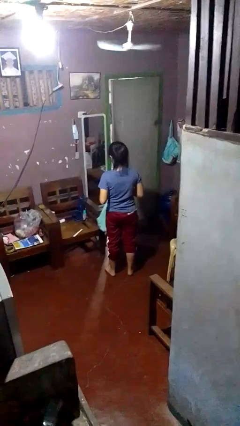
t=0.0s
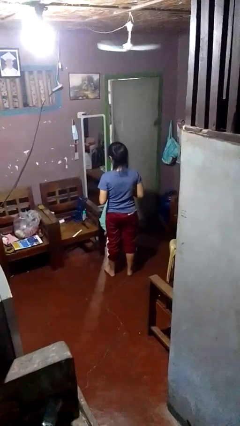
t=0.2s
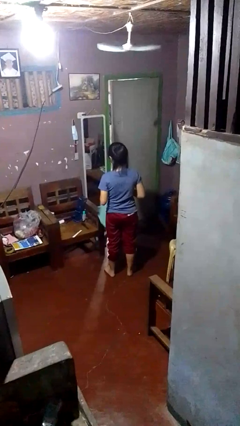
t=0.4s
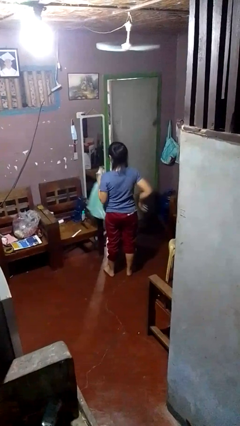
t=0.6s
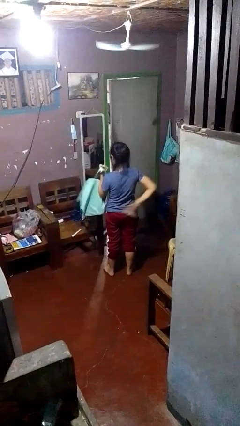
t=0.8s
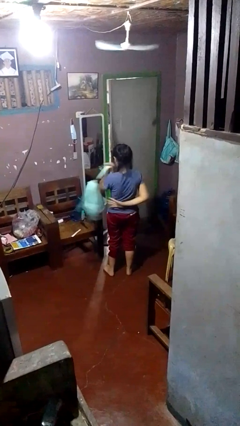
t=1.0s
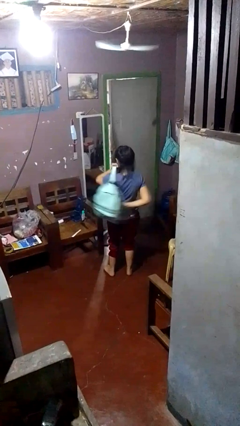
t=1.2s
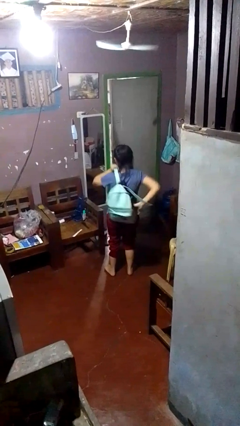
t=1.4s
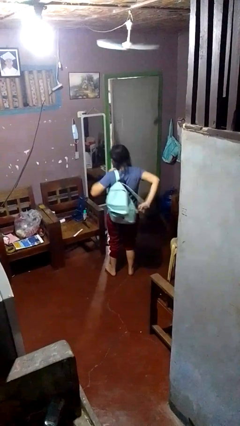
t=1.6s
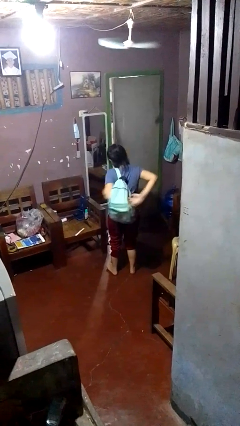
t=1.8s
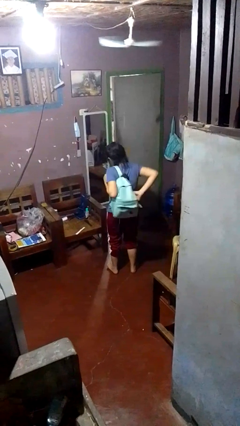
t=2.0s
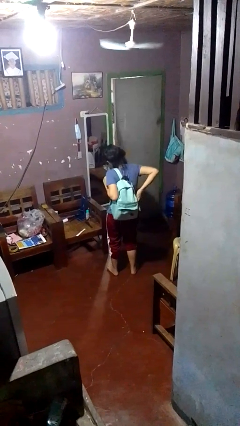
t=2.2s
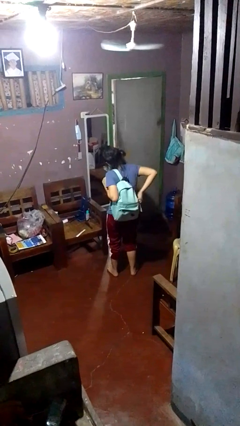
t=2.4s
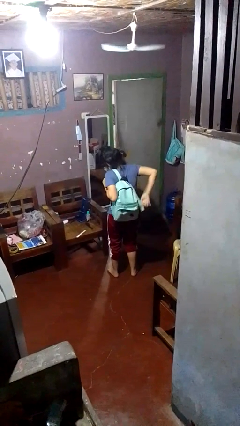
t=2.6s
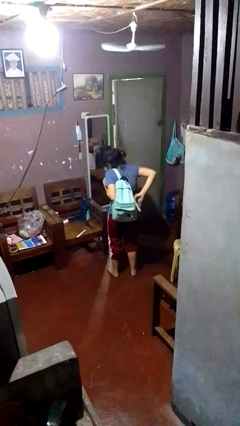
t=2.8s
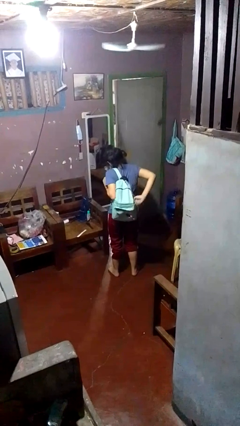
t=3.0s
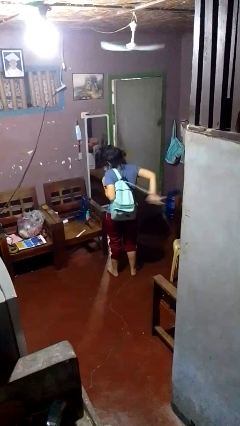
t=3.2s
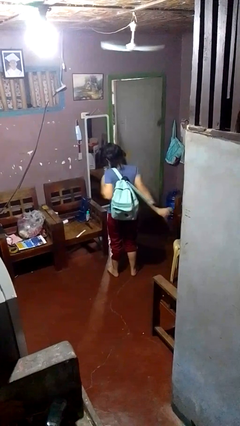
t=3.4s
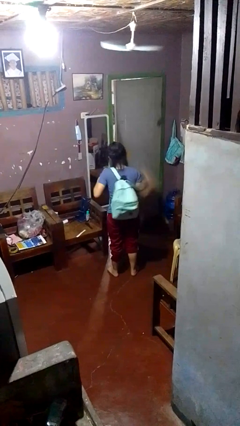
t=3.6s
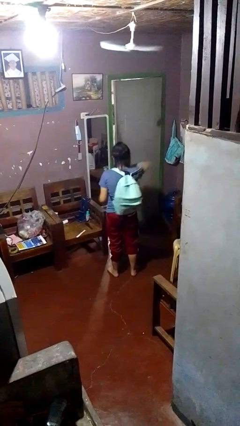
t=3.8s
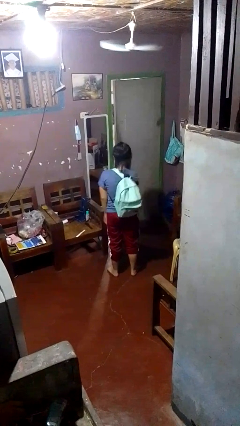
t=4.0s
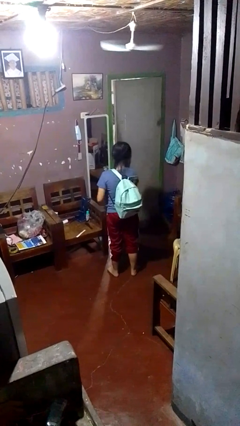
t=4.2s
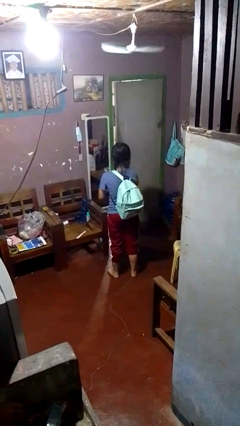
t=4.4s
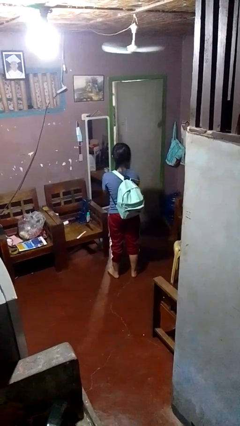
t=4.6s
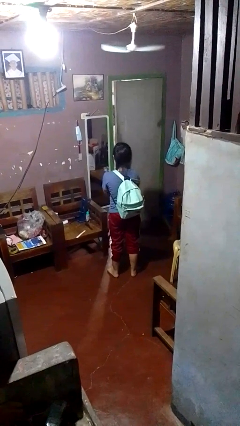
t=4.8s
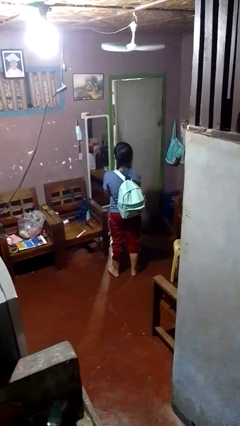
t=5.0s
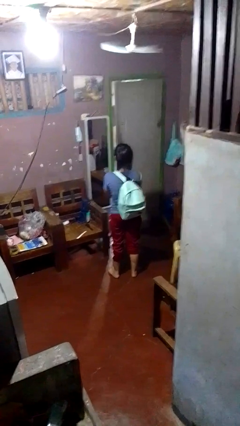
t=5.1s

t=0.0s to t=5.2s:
person puts on backpack

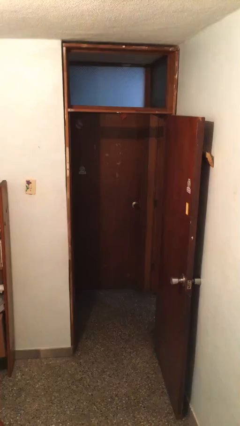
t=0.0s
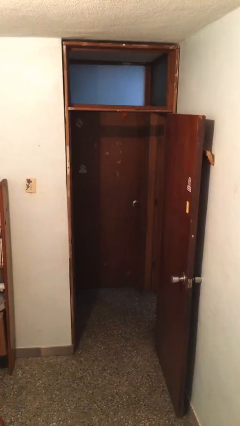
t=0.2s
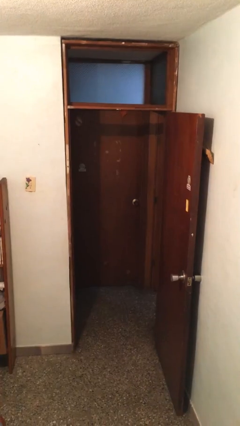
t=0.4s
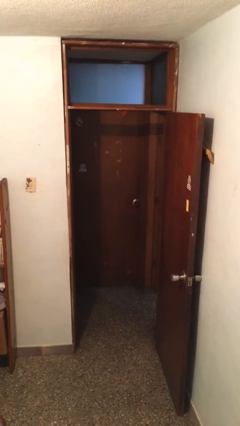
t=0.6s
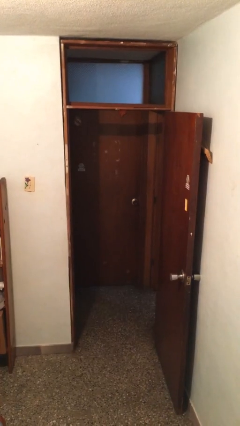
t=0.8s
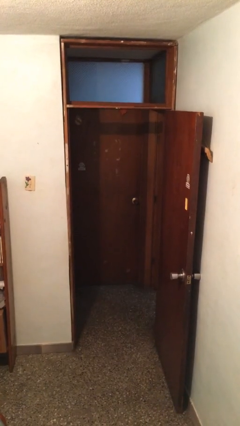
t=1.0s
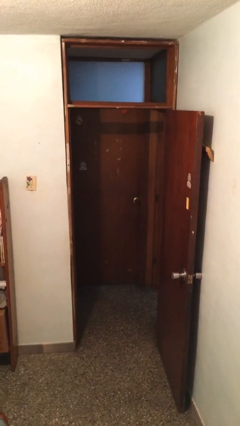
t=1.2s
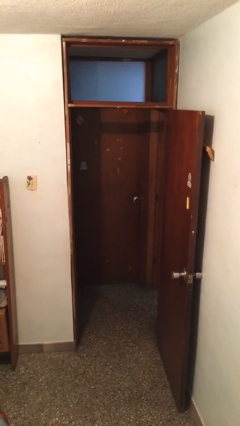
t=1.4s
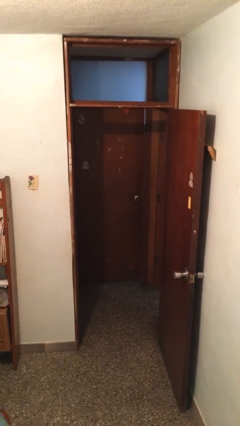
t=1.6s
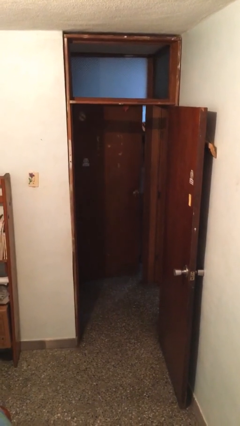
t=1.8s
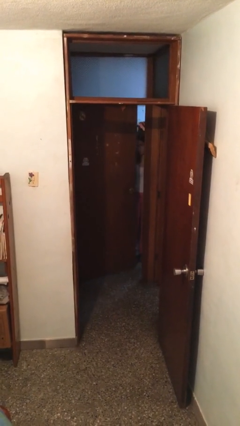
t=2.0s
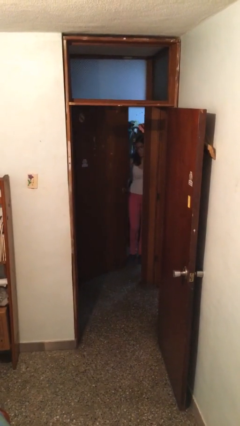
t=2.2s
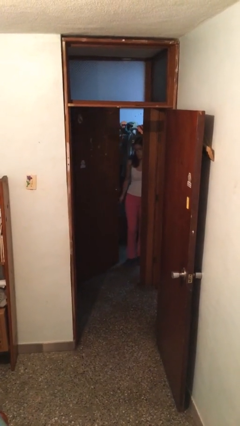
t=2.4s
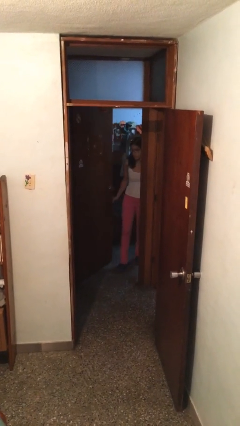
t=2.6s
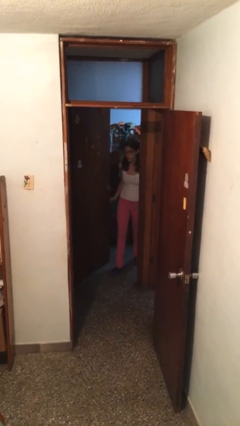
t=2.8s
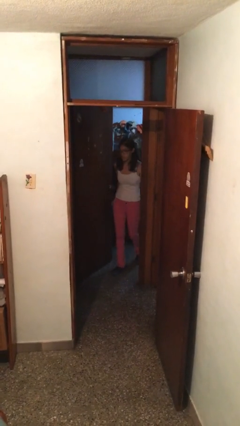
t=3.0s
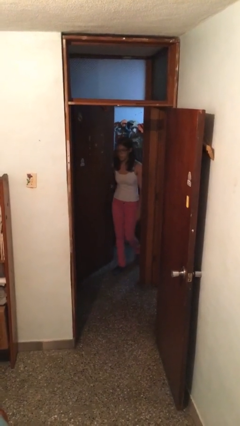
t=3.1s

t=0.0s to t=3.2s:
person opens facility door

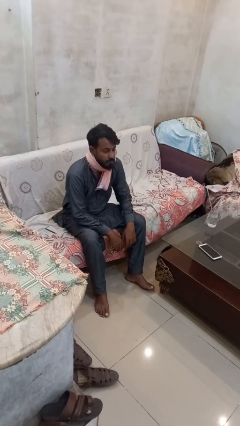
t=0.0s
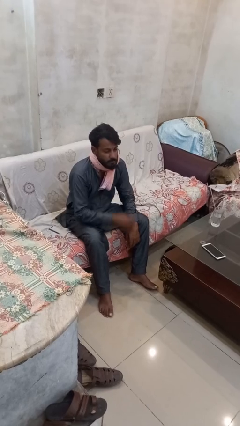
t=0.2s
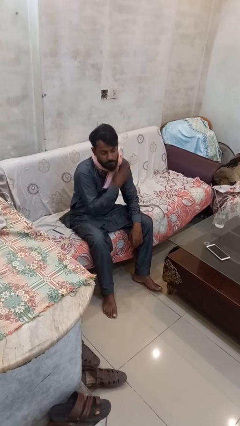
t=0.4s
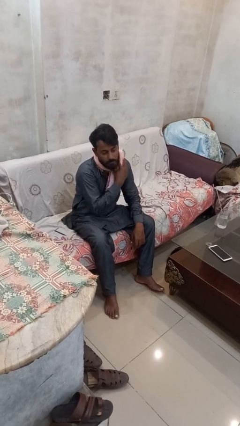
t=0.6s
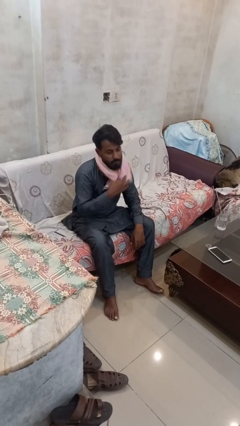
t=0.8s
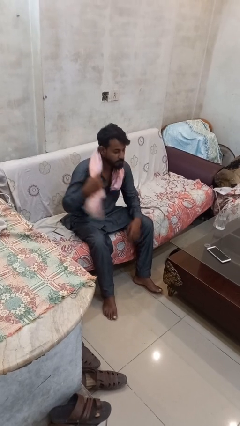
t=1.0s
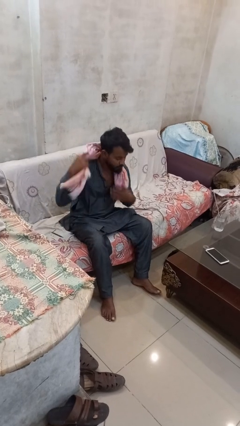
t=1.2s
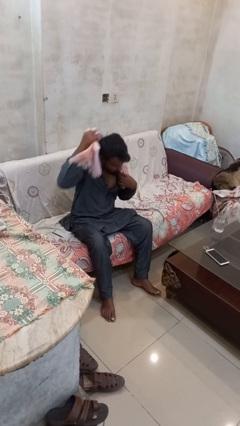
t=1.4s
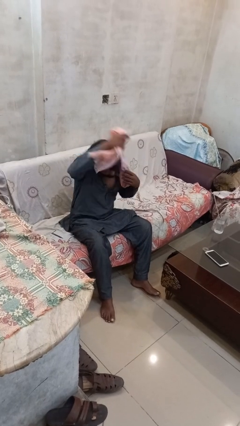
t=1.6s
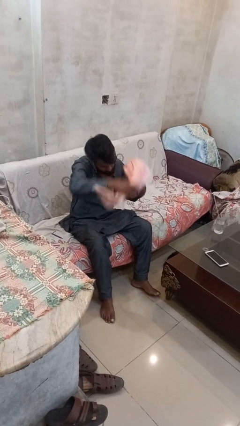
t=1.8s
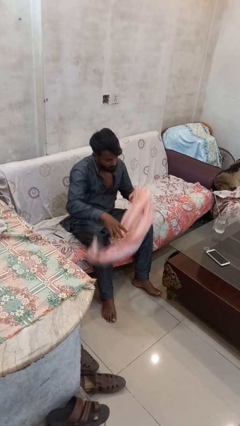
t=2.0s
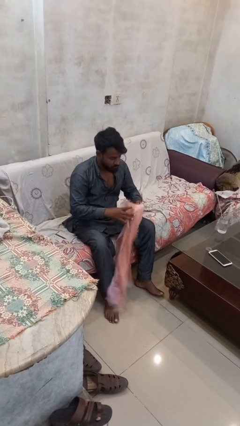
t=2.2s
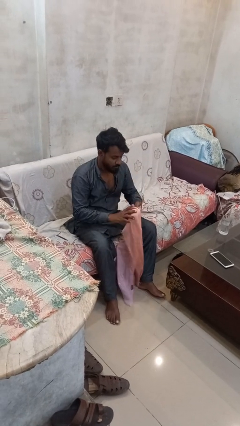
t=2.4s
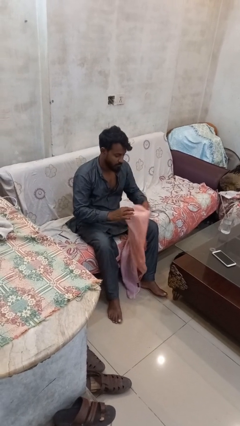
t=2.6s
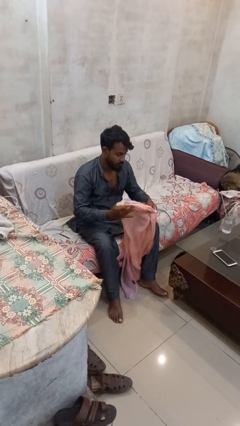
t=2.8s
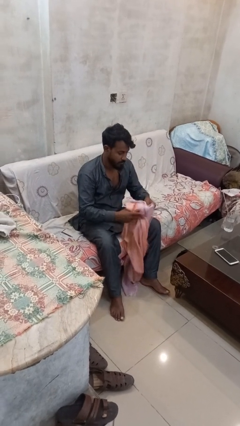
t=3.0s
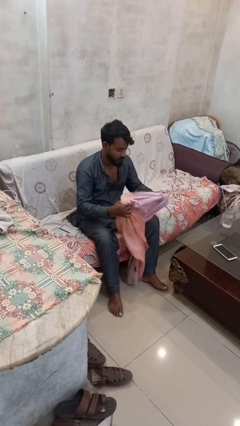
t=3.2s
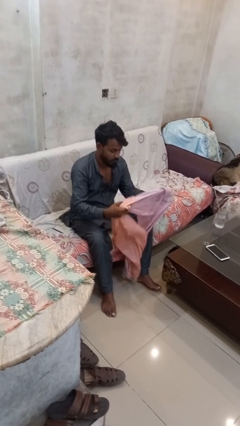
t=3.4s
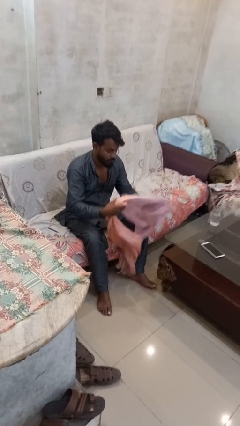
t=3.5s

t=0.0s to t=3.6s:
person takes off scarf

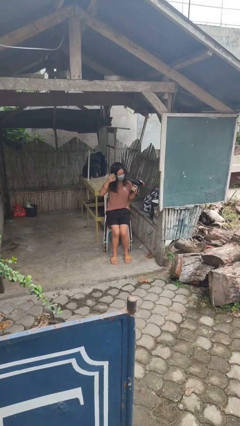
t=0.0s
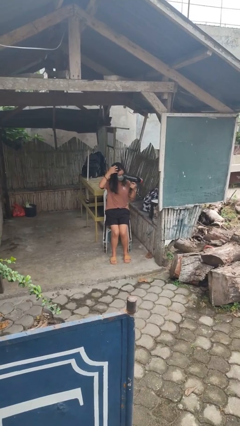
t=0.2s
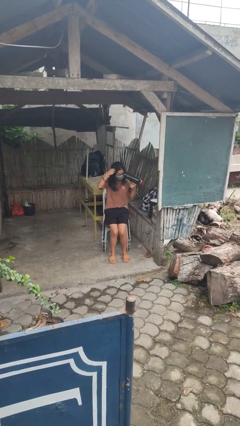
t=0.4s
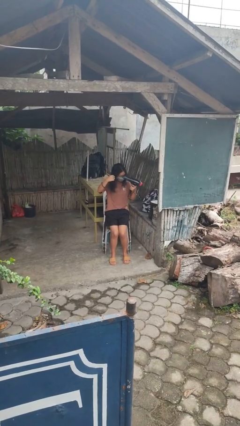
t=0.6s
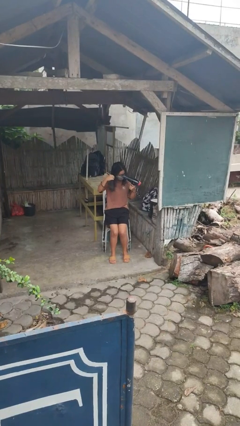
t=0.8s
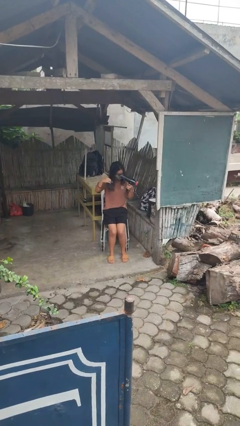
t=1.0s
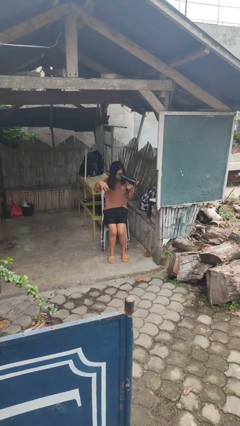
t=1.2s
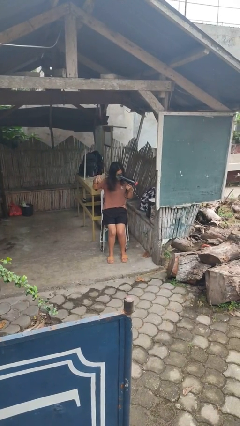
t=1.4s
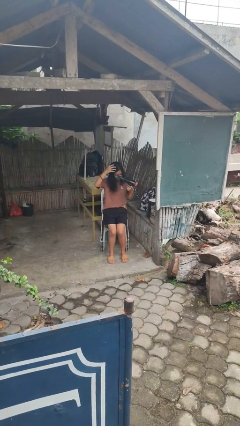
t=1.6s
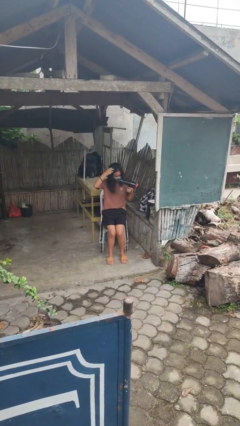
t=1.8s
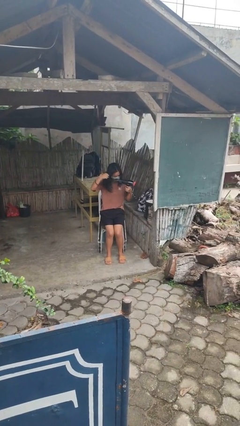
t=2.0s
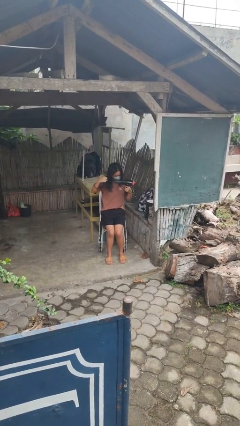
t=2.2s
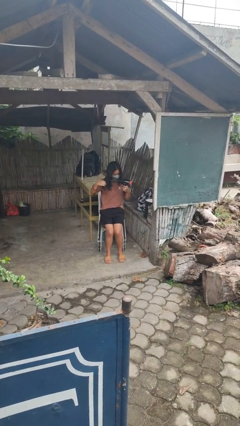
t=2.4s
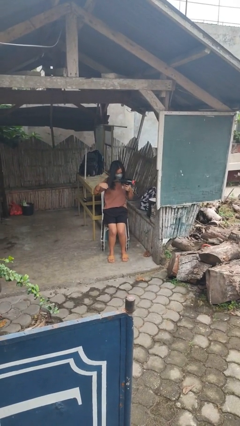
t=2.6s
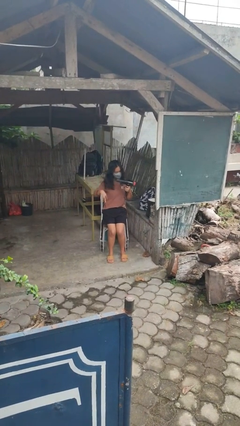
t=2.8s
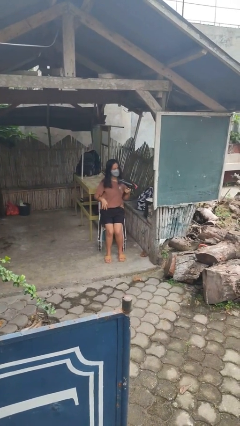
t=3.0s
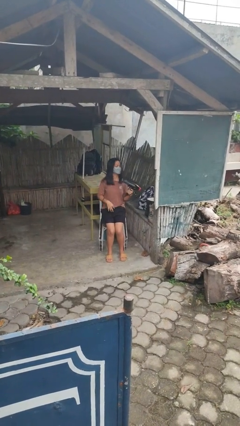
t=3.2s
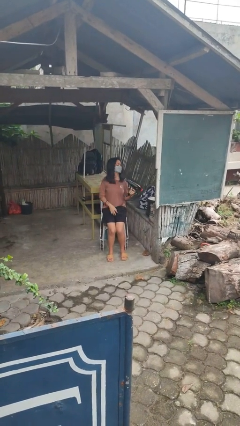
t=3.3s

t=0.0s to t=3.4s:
person dries hair with hairdryer

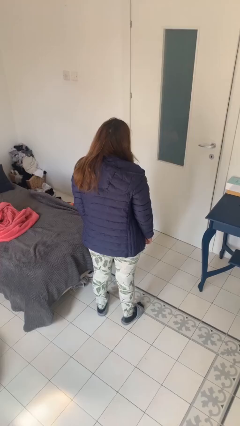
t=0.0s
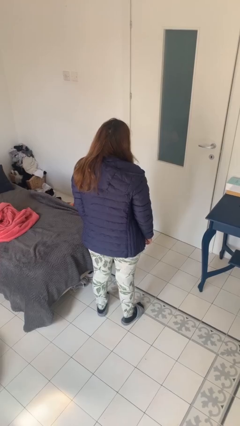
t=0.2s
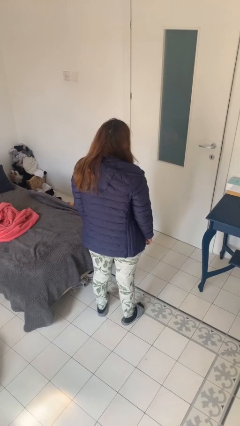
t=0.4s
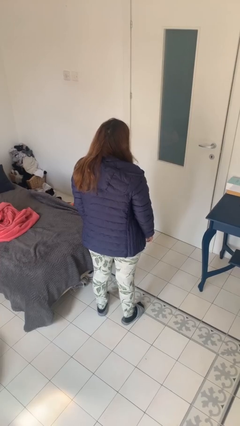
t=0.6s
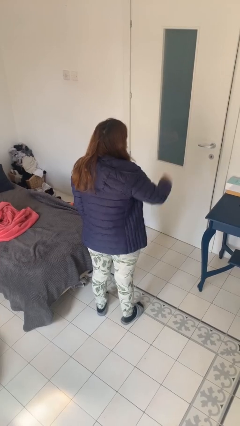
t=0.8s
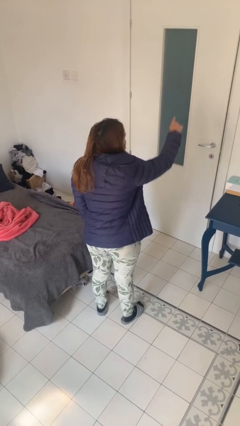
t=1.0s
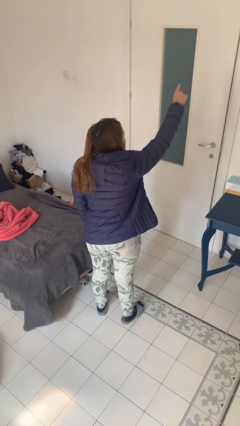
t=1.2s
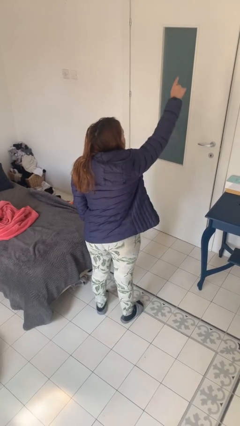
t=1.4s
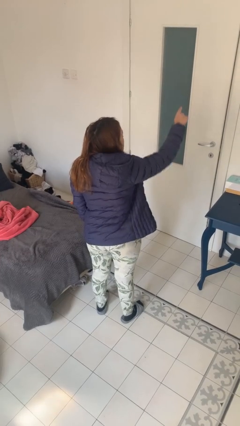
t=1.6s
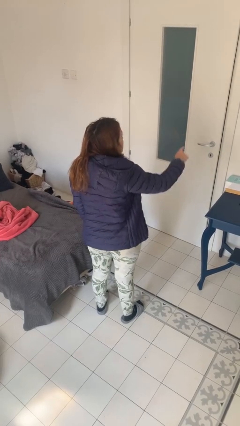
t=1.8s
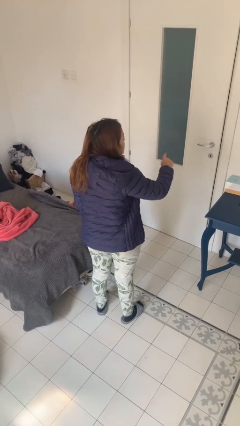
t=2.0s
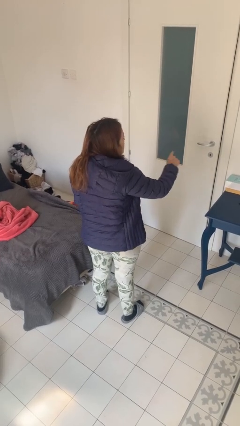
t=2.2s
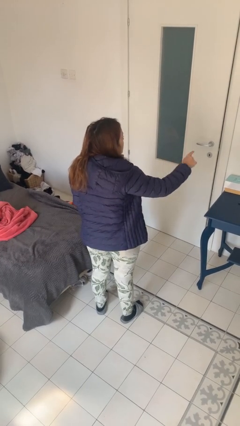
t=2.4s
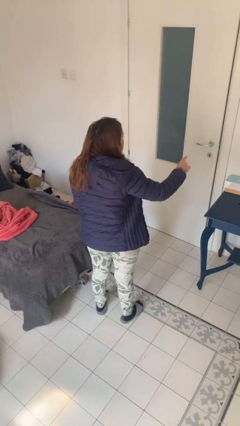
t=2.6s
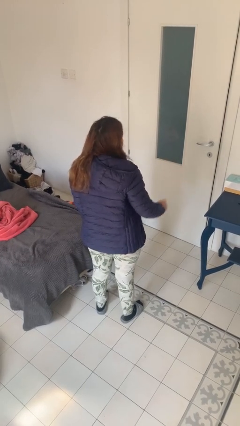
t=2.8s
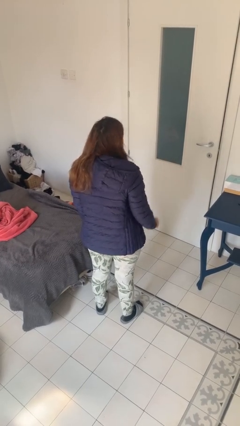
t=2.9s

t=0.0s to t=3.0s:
person gestures number one
